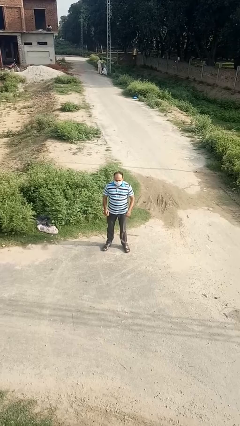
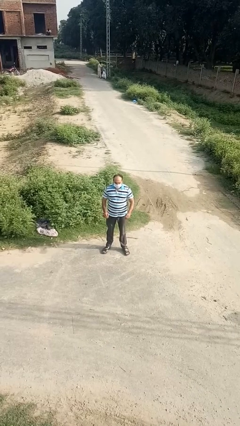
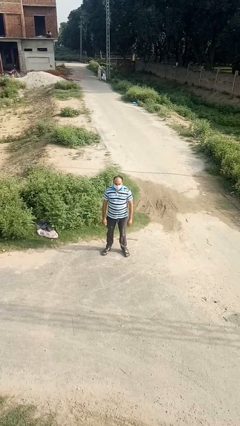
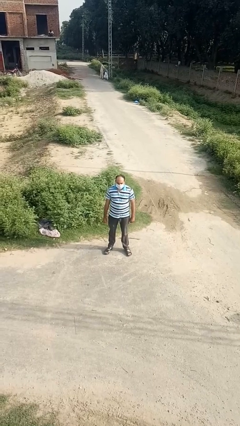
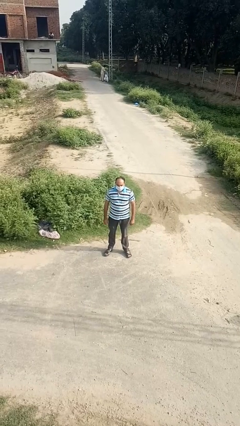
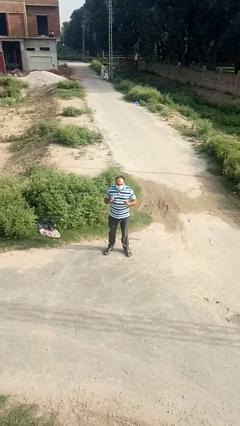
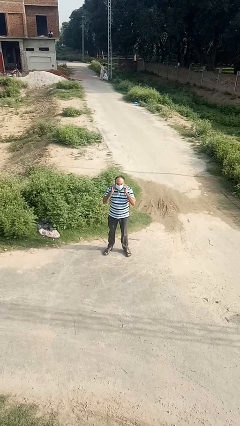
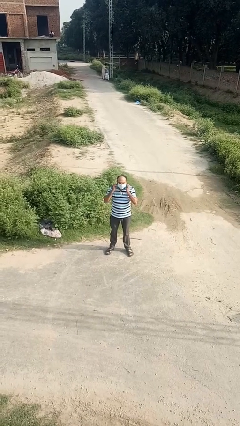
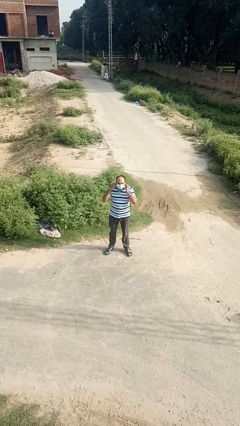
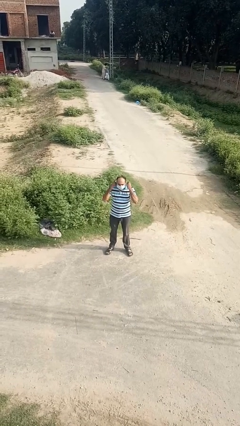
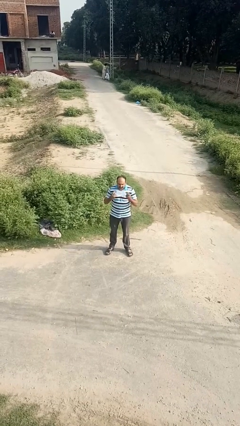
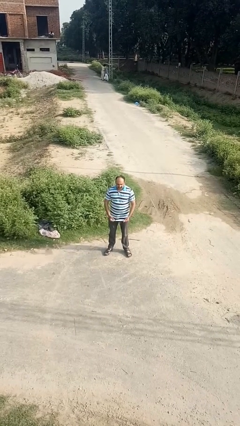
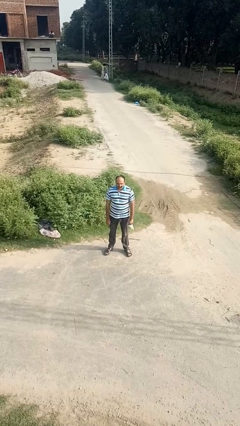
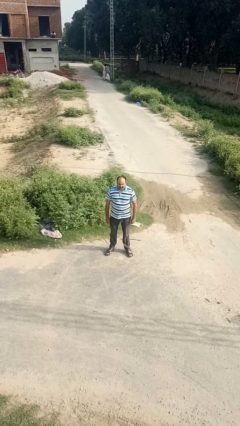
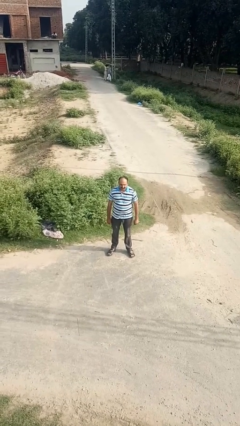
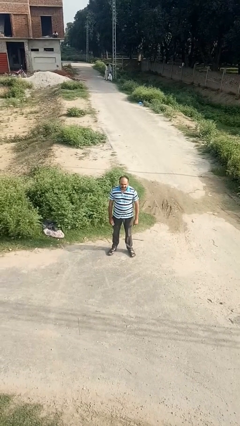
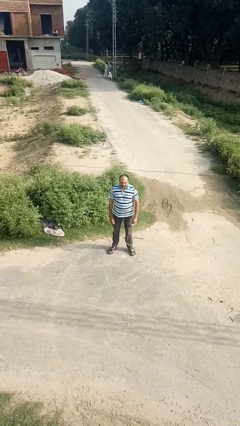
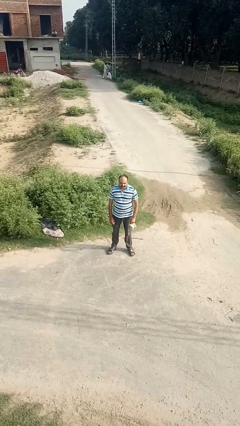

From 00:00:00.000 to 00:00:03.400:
person takes off facemask

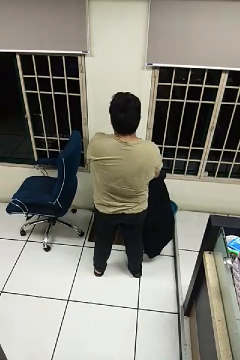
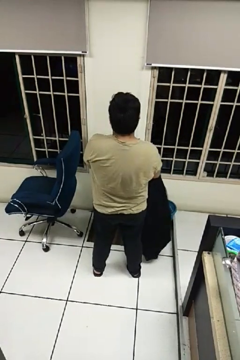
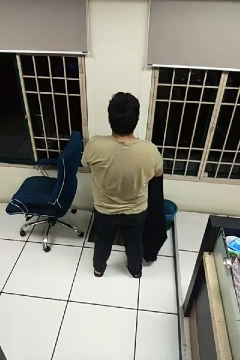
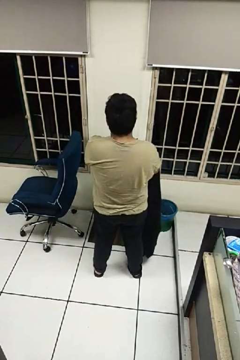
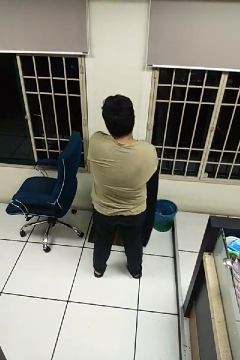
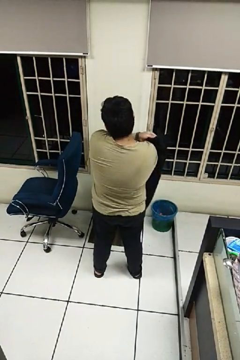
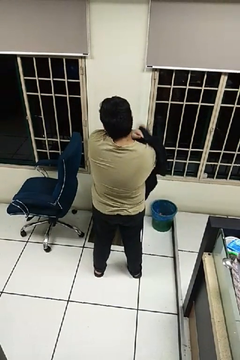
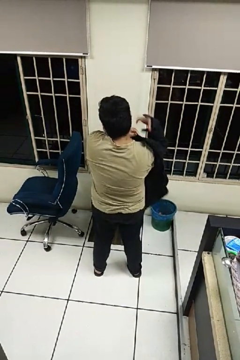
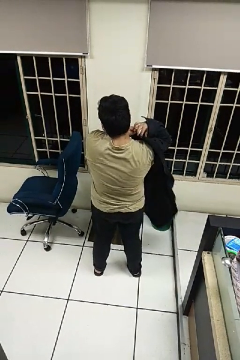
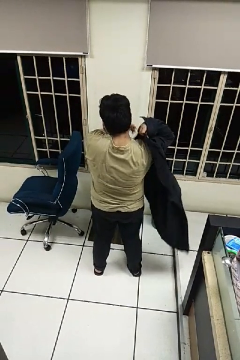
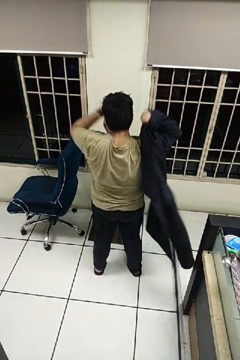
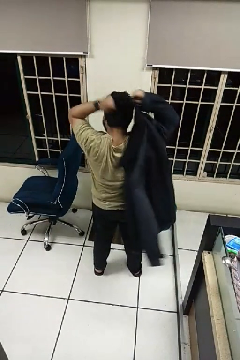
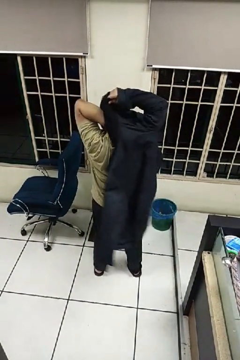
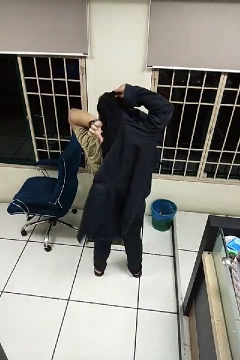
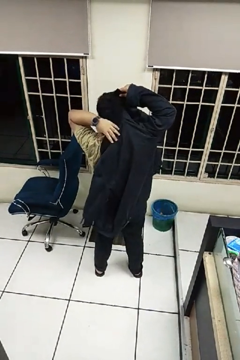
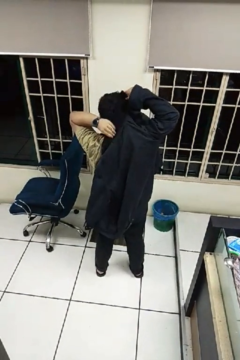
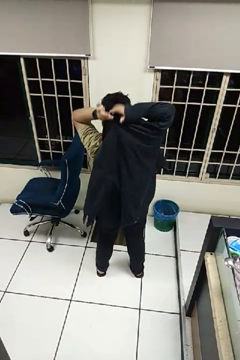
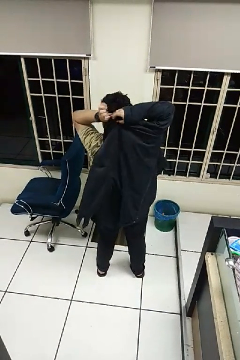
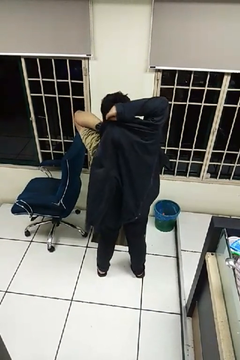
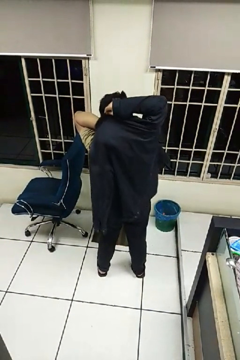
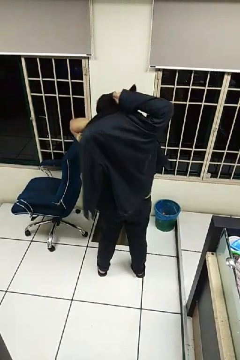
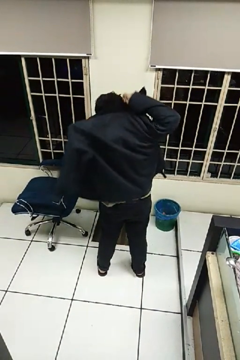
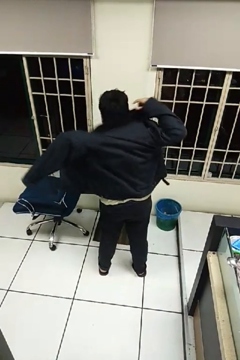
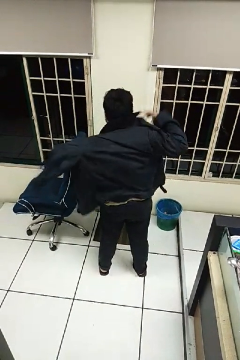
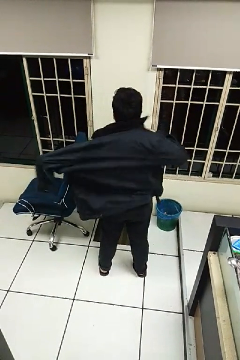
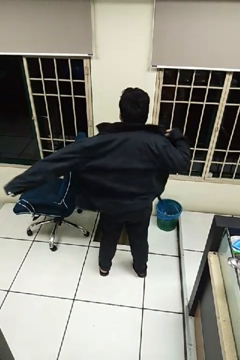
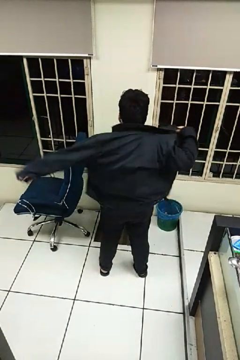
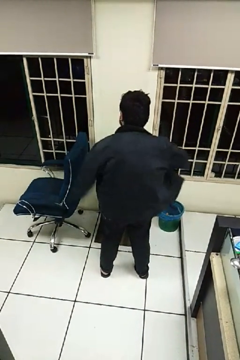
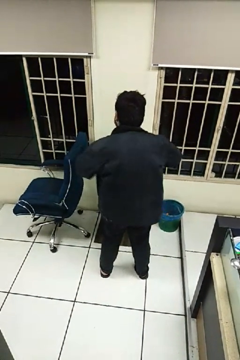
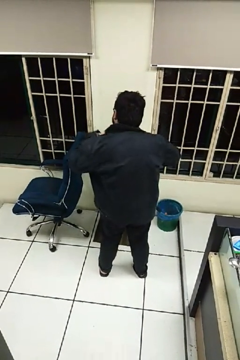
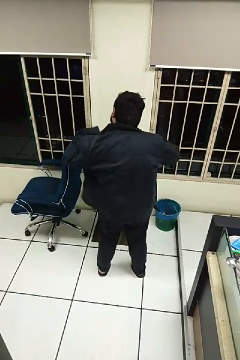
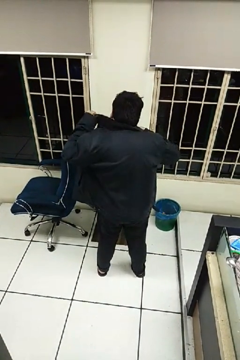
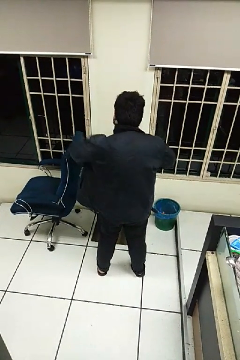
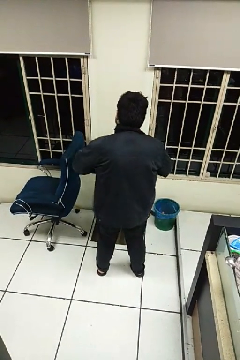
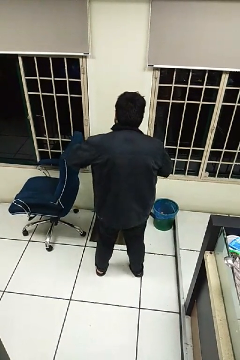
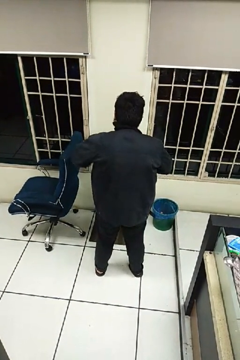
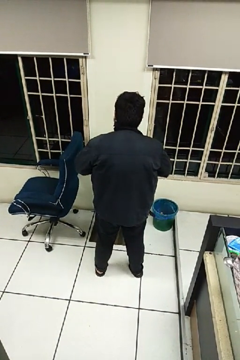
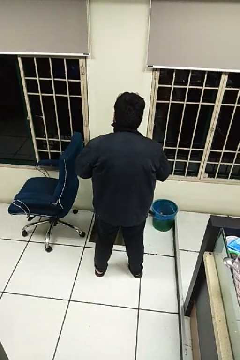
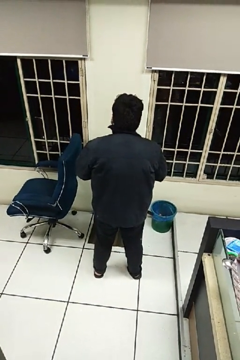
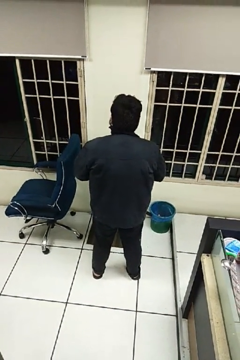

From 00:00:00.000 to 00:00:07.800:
person puts on shirt

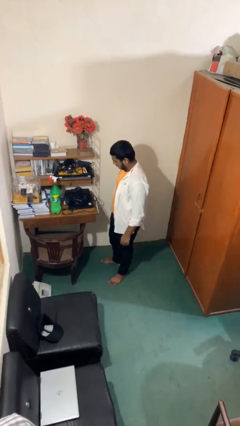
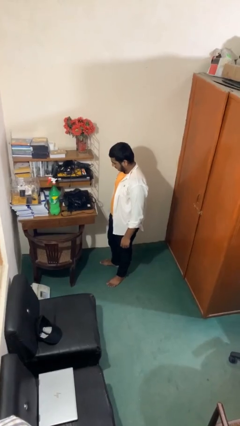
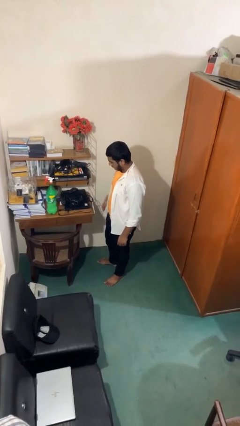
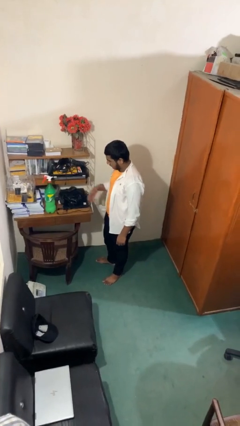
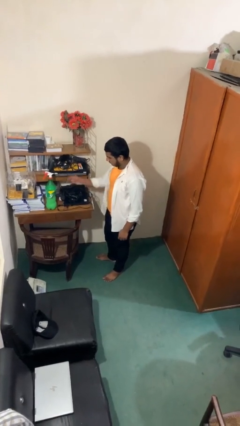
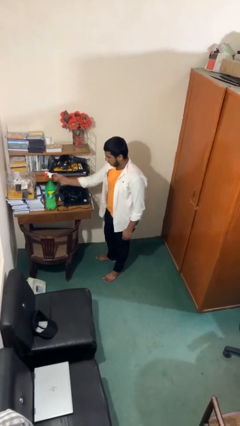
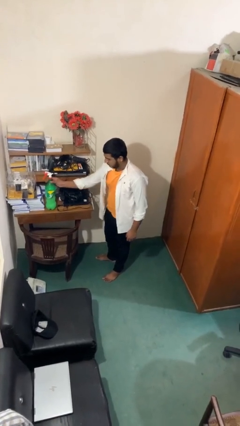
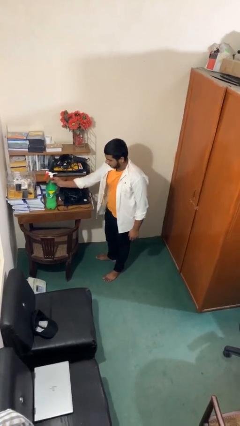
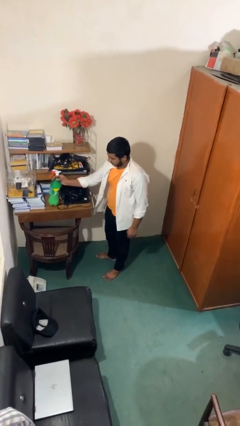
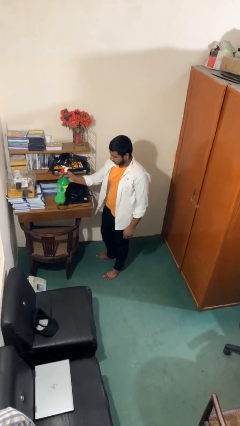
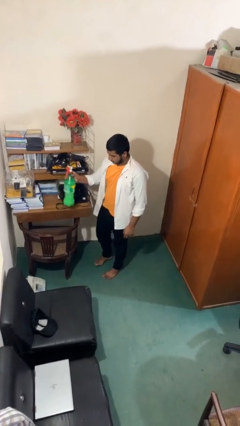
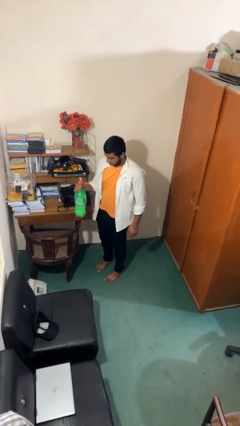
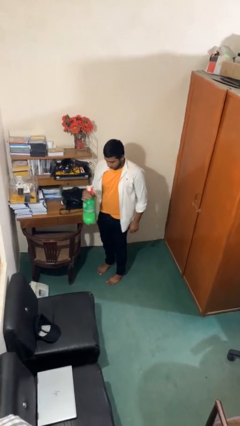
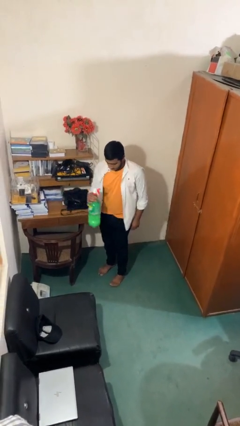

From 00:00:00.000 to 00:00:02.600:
person picks up object from table

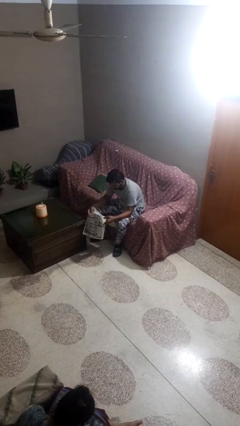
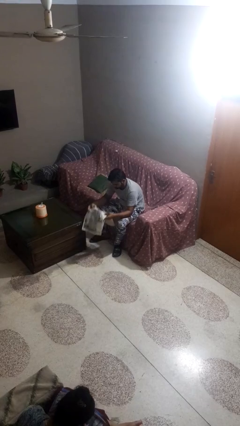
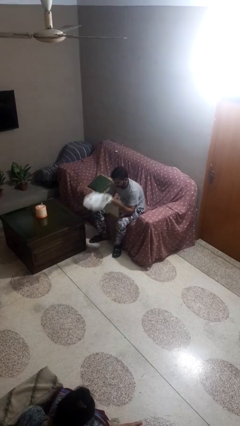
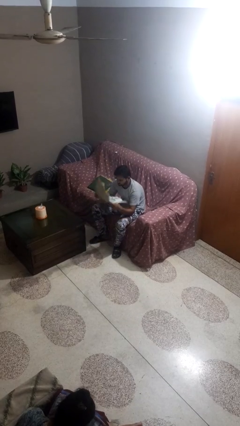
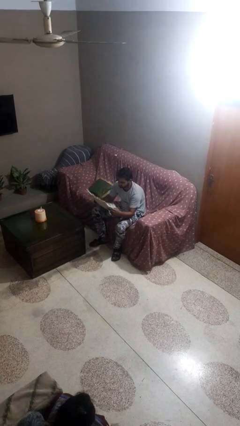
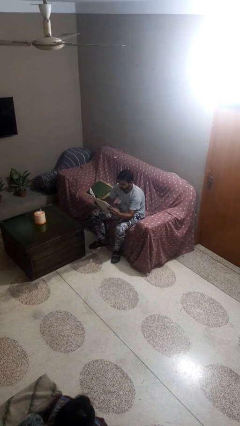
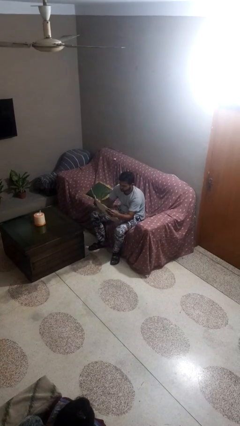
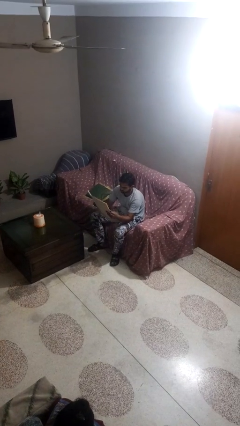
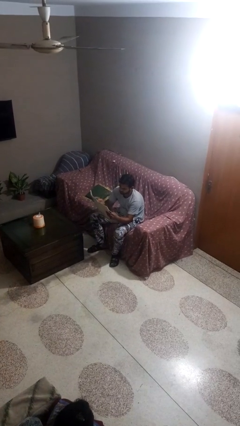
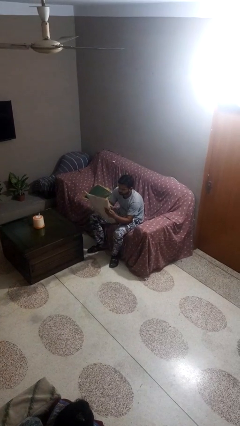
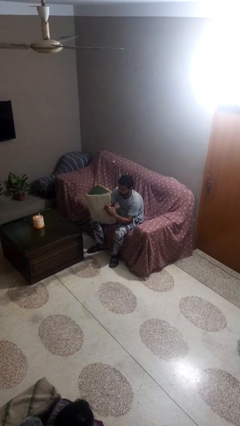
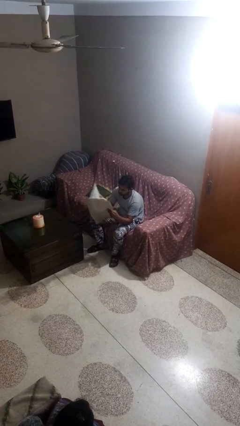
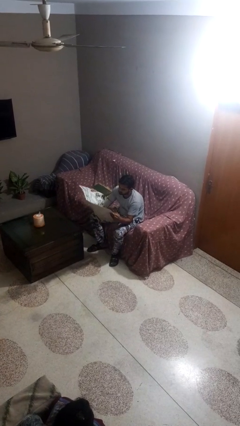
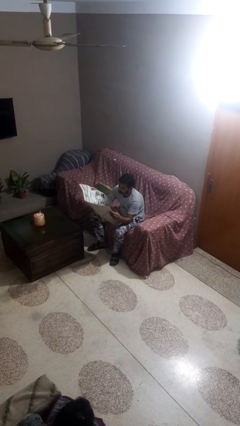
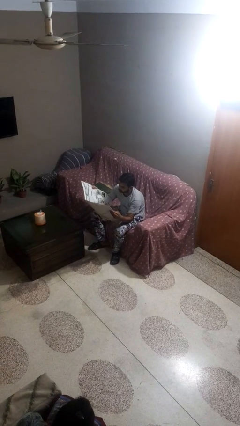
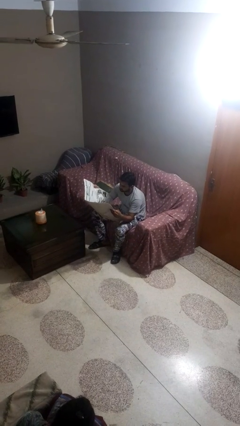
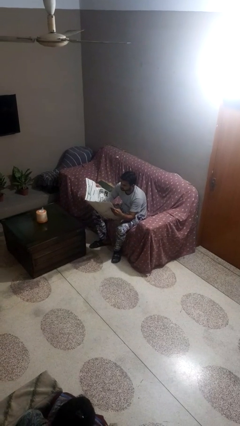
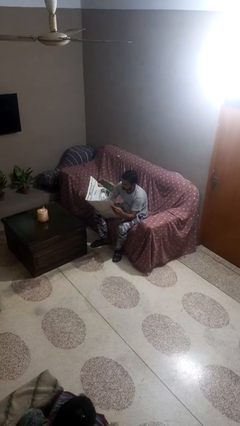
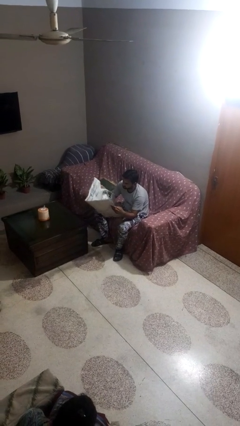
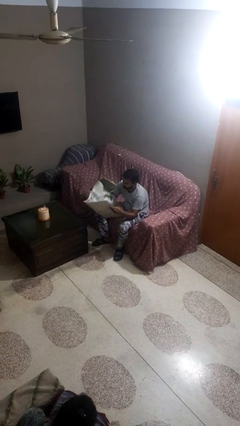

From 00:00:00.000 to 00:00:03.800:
person reads newspaper

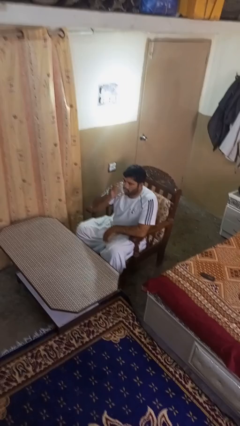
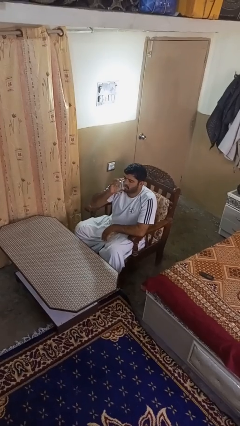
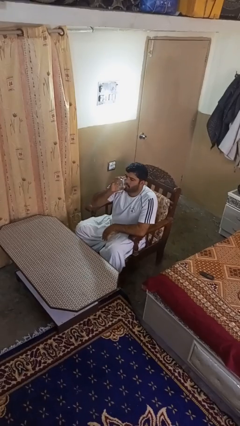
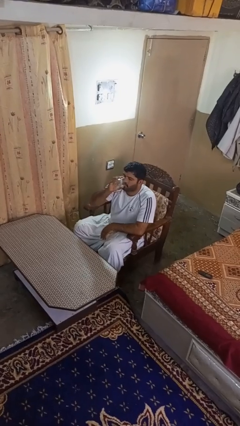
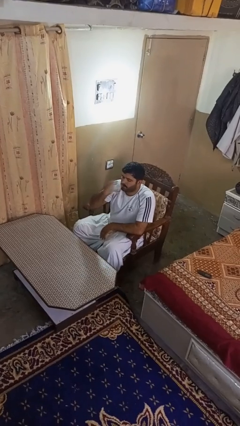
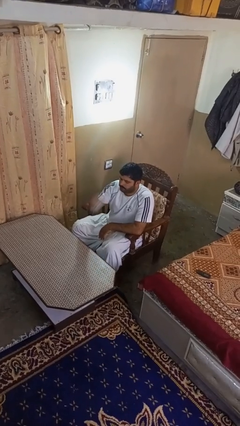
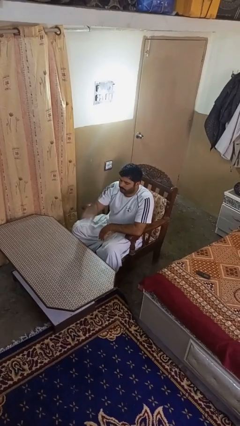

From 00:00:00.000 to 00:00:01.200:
person drinks from shotglass

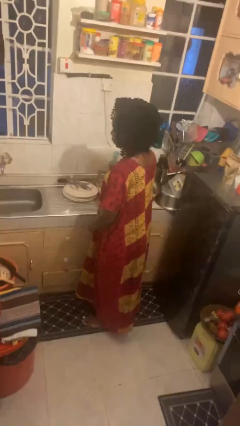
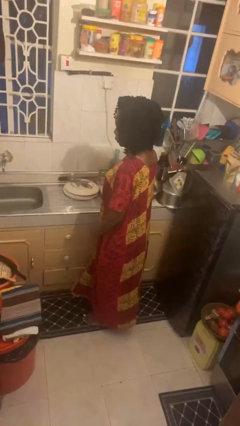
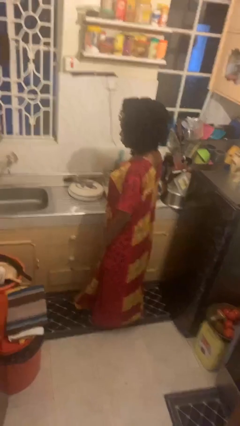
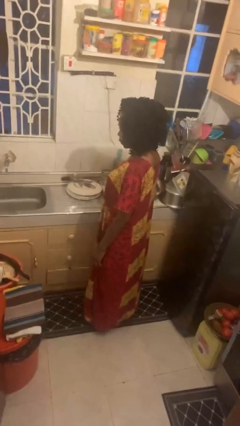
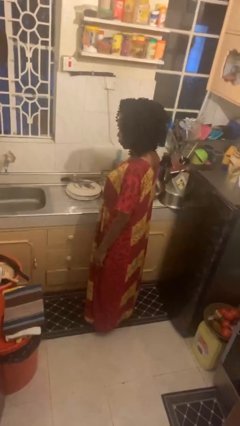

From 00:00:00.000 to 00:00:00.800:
person closes kitchen drawer
